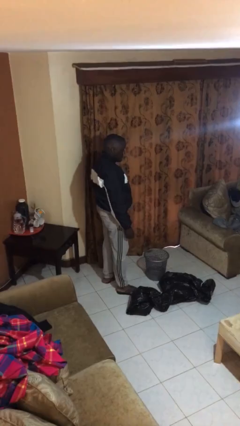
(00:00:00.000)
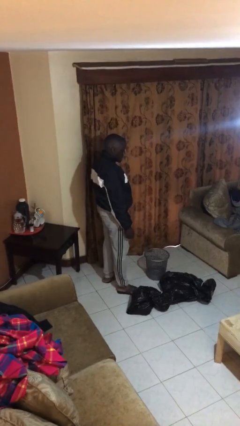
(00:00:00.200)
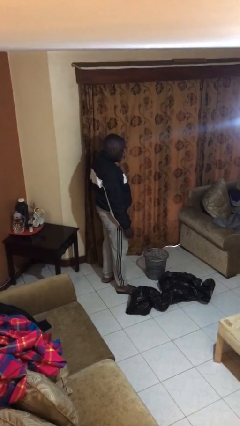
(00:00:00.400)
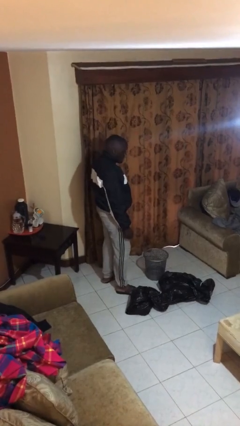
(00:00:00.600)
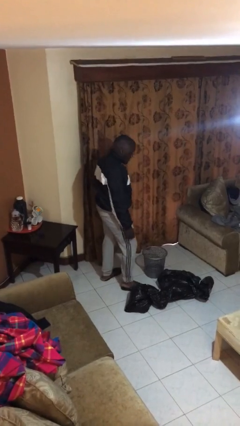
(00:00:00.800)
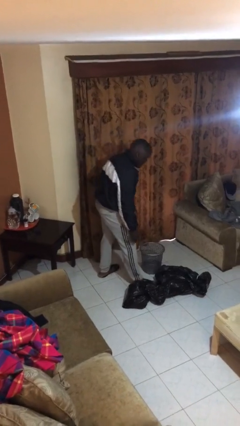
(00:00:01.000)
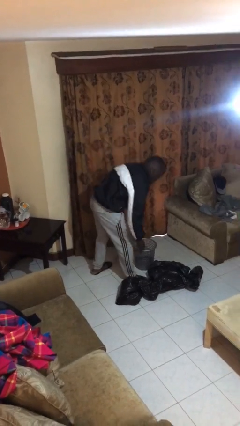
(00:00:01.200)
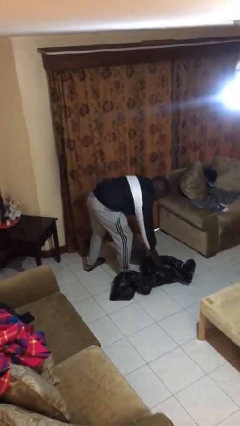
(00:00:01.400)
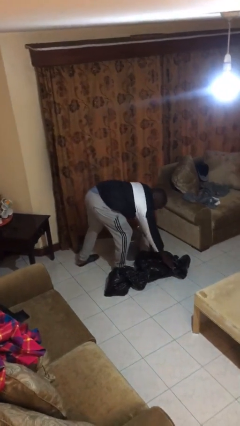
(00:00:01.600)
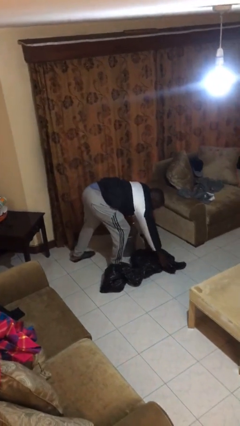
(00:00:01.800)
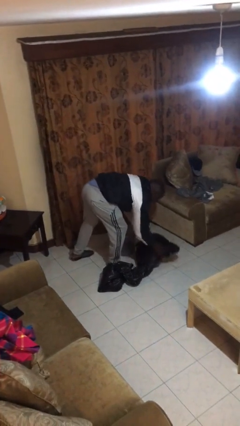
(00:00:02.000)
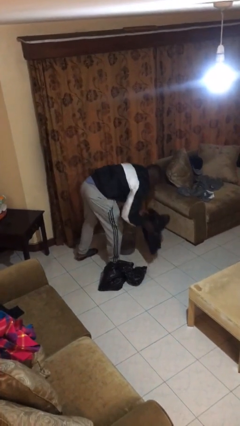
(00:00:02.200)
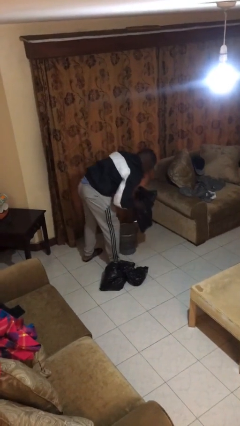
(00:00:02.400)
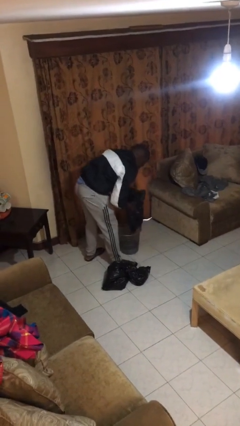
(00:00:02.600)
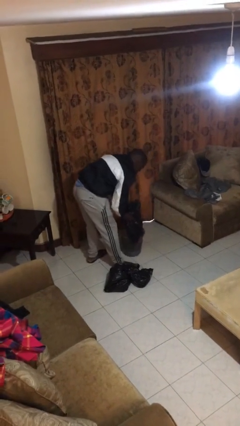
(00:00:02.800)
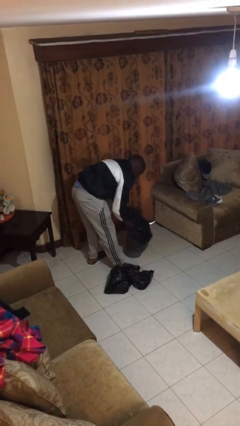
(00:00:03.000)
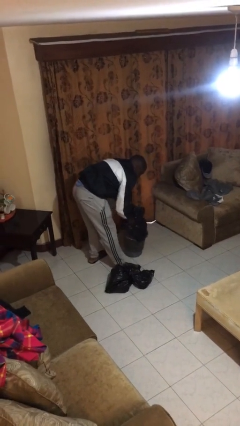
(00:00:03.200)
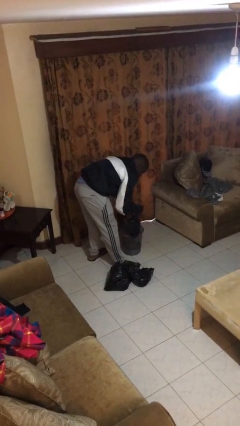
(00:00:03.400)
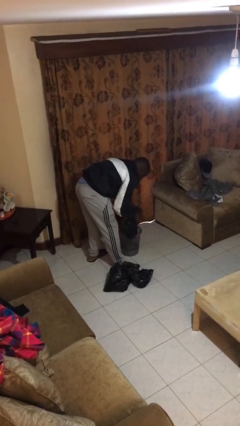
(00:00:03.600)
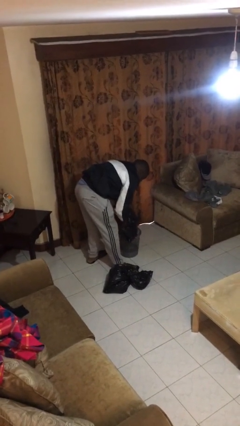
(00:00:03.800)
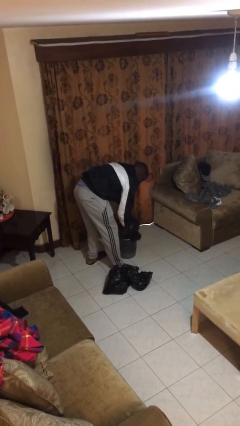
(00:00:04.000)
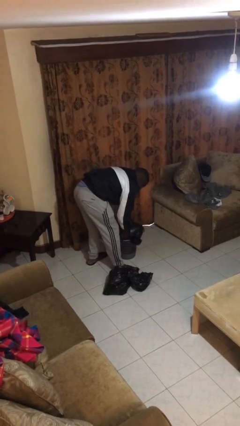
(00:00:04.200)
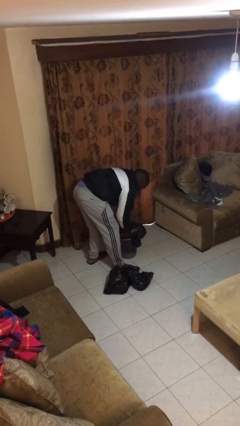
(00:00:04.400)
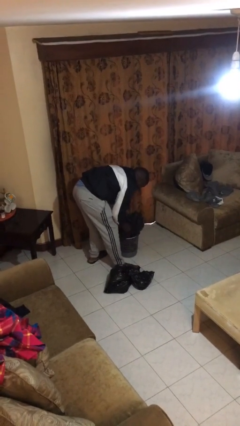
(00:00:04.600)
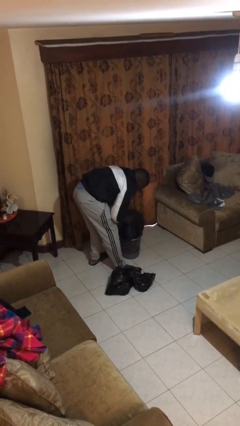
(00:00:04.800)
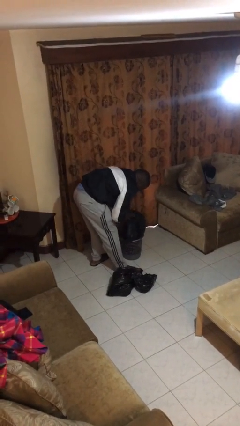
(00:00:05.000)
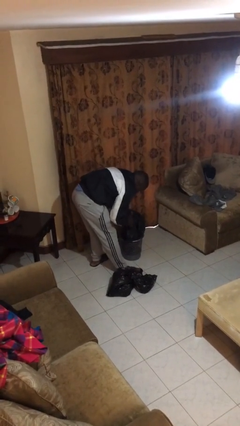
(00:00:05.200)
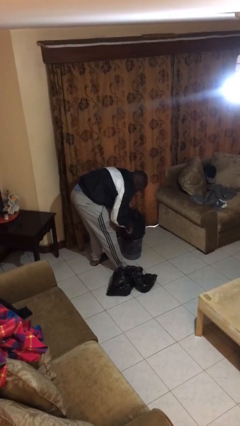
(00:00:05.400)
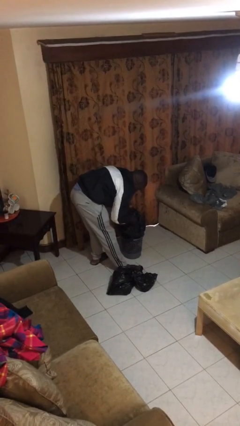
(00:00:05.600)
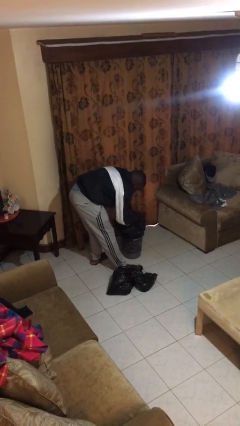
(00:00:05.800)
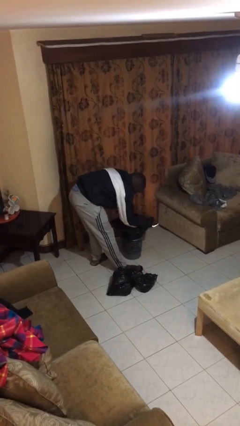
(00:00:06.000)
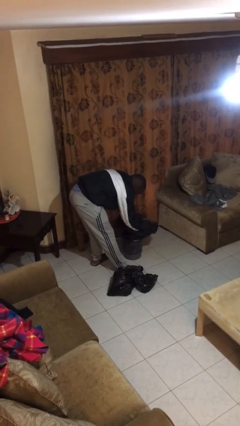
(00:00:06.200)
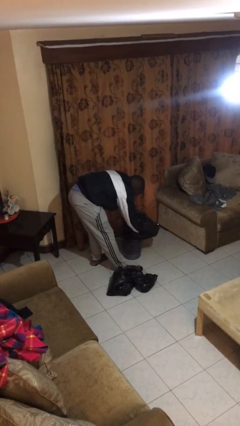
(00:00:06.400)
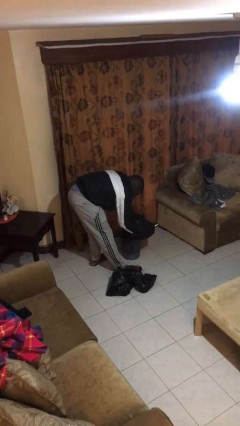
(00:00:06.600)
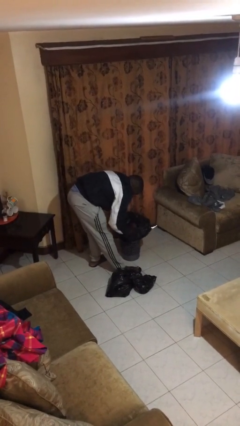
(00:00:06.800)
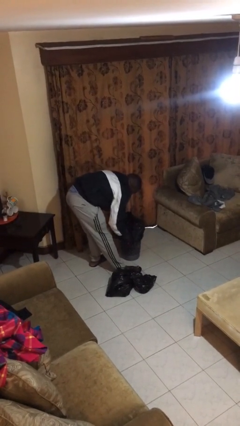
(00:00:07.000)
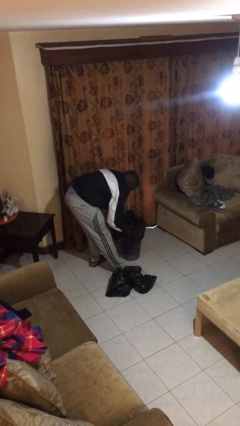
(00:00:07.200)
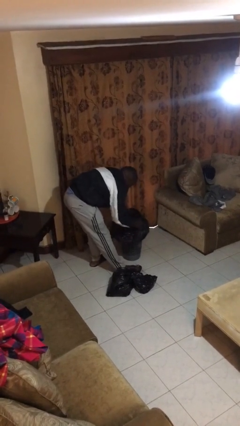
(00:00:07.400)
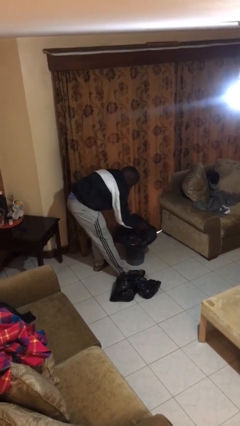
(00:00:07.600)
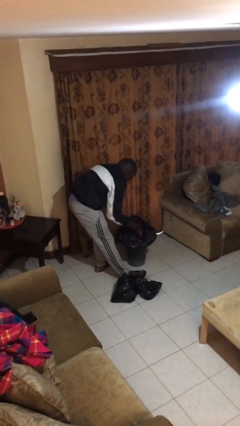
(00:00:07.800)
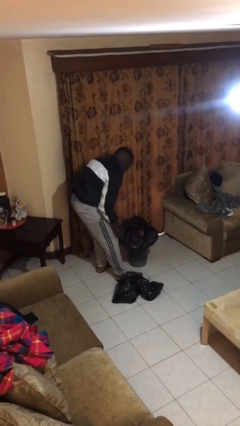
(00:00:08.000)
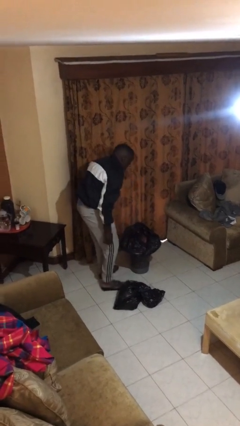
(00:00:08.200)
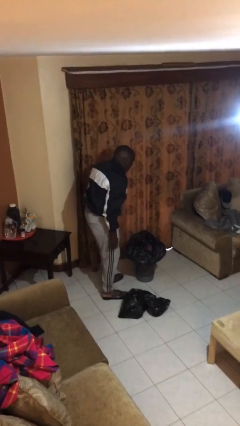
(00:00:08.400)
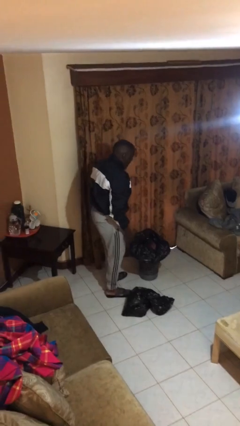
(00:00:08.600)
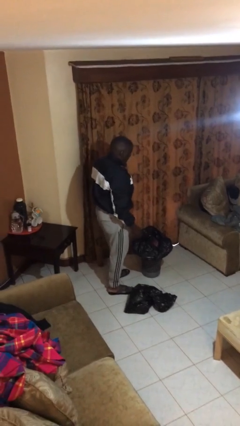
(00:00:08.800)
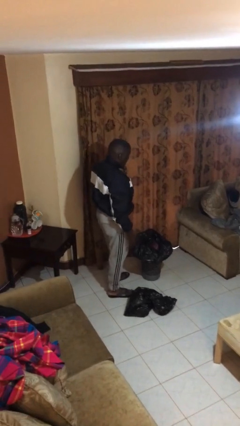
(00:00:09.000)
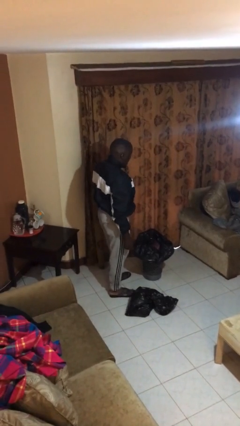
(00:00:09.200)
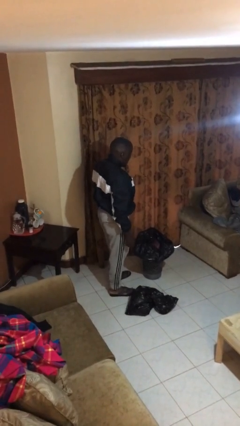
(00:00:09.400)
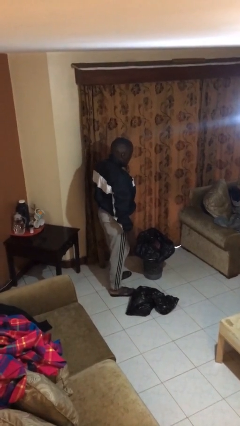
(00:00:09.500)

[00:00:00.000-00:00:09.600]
person inserts trashbag into trashcan

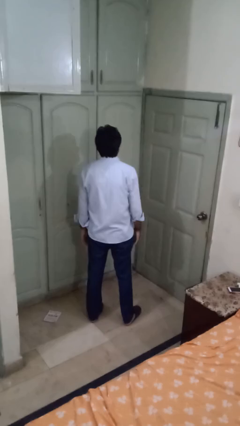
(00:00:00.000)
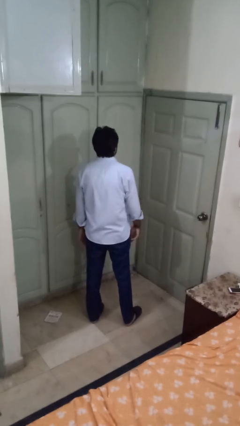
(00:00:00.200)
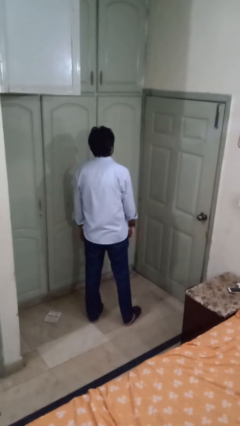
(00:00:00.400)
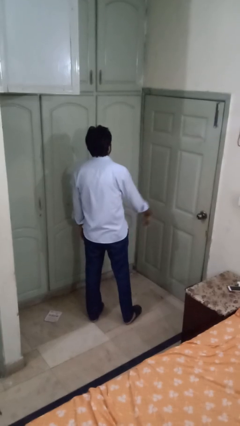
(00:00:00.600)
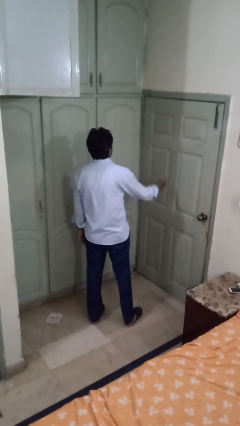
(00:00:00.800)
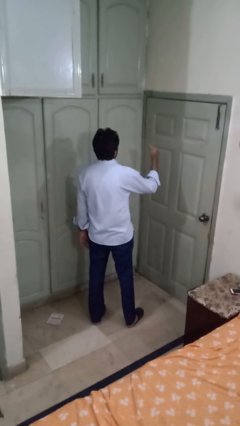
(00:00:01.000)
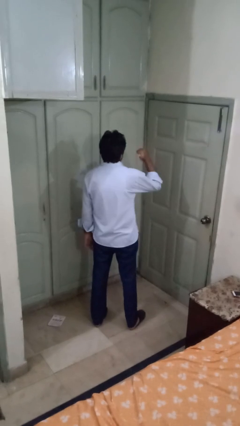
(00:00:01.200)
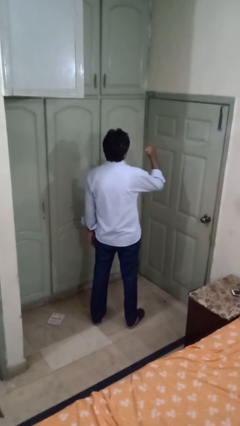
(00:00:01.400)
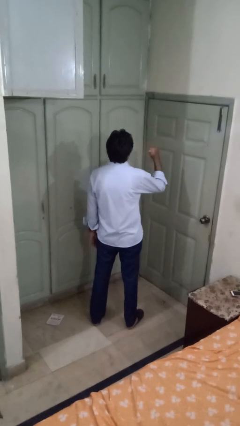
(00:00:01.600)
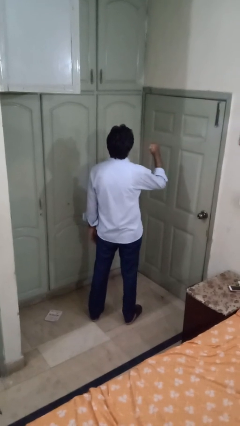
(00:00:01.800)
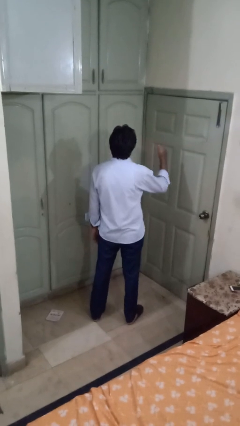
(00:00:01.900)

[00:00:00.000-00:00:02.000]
person gestures behind me

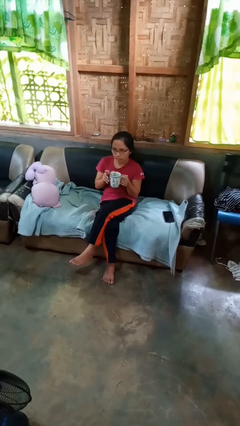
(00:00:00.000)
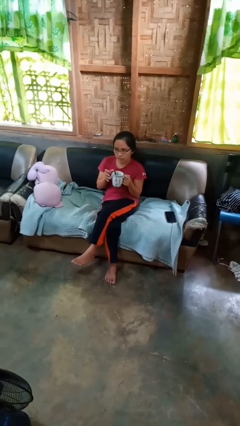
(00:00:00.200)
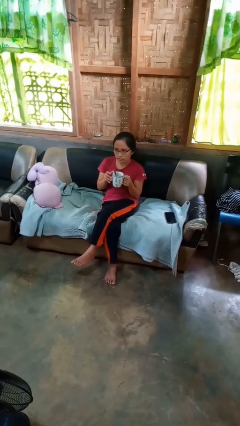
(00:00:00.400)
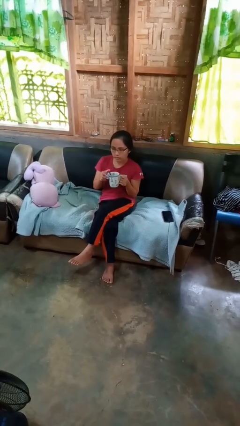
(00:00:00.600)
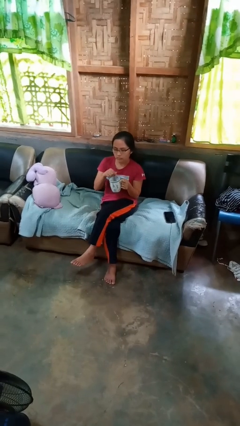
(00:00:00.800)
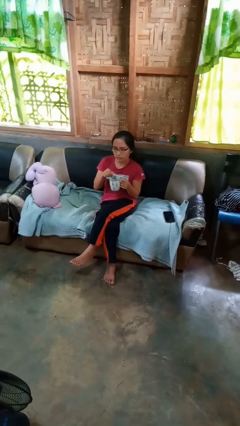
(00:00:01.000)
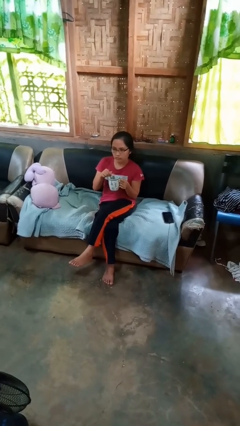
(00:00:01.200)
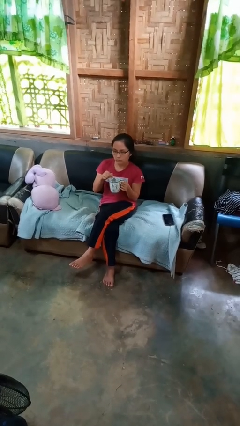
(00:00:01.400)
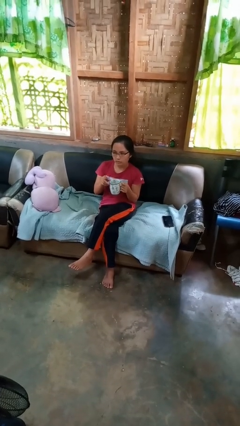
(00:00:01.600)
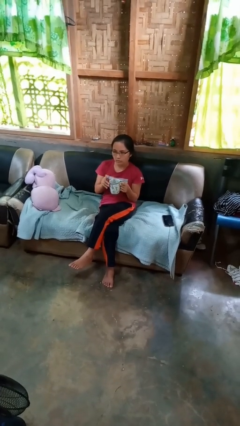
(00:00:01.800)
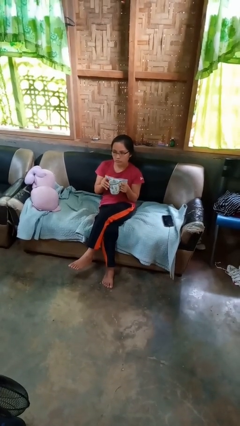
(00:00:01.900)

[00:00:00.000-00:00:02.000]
person stirs mug

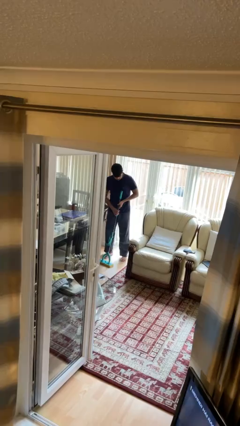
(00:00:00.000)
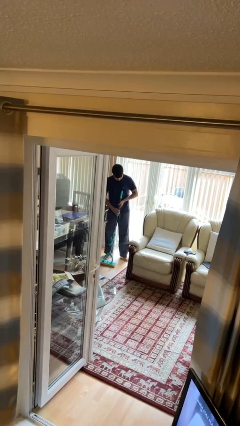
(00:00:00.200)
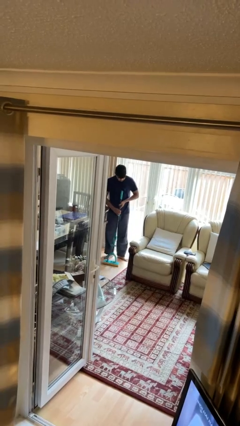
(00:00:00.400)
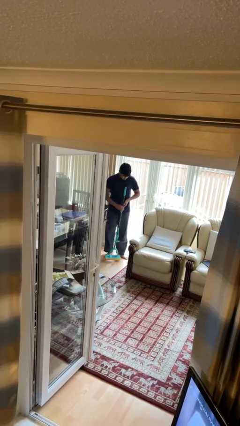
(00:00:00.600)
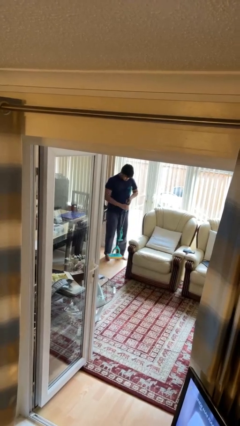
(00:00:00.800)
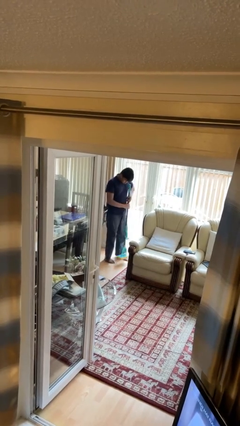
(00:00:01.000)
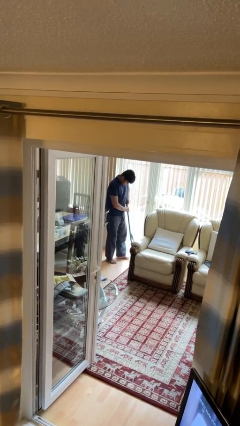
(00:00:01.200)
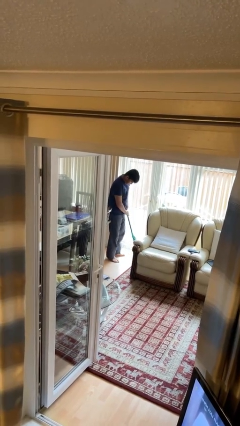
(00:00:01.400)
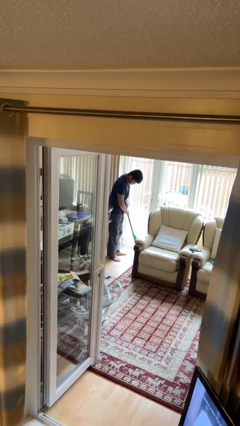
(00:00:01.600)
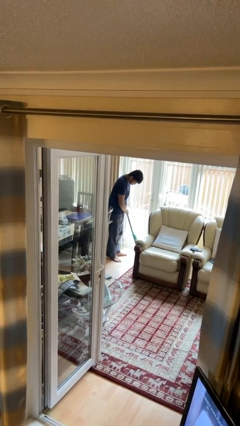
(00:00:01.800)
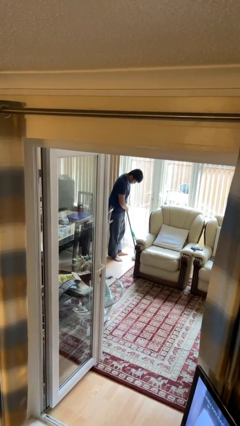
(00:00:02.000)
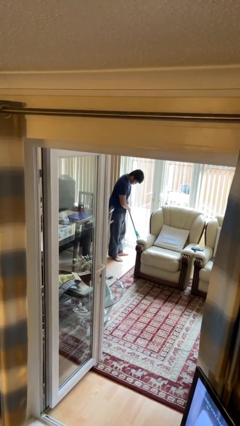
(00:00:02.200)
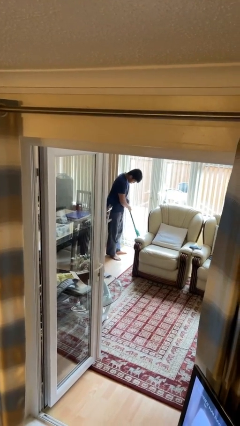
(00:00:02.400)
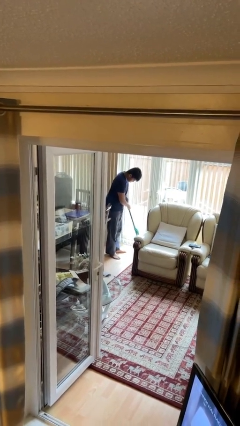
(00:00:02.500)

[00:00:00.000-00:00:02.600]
person mops

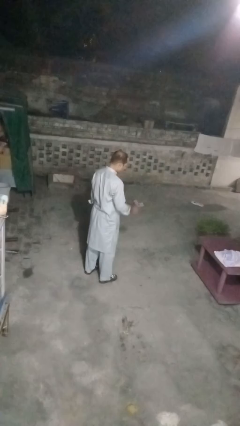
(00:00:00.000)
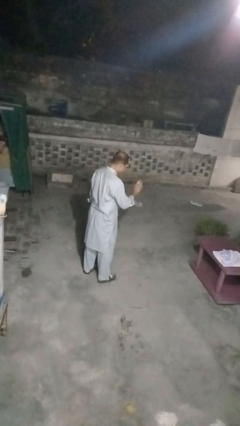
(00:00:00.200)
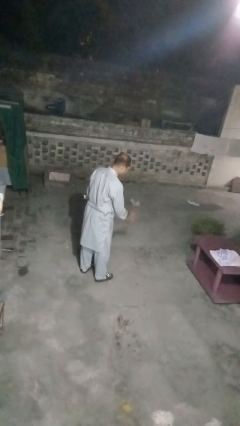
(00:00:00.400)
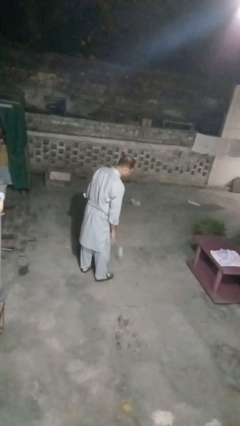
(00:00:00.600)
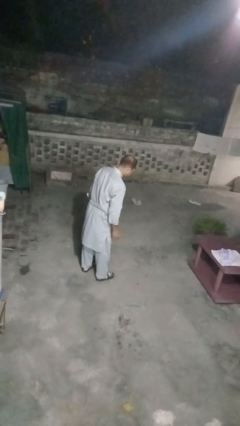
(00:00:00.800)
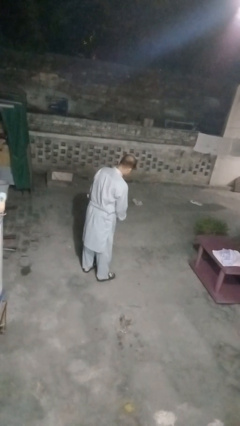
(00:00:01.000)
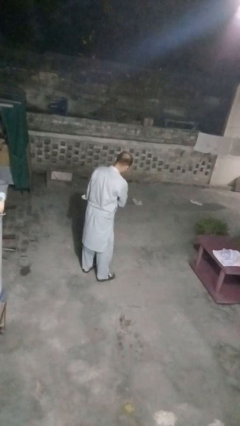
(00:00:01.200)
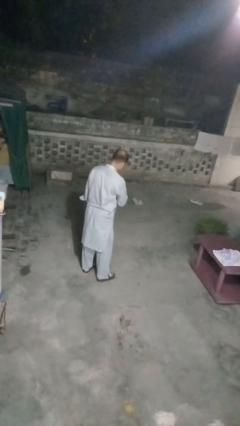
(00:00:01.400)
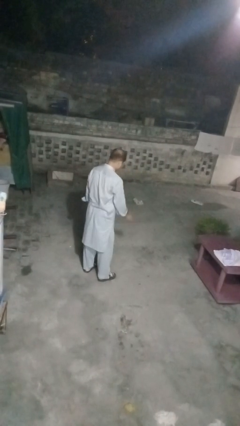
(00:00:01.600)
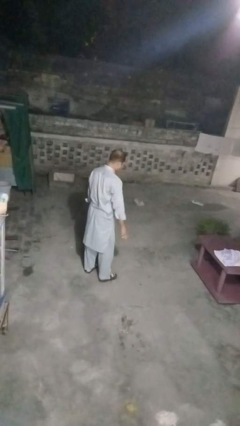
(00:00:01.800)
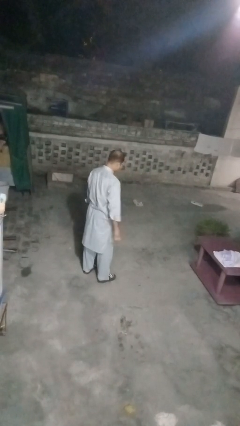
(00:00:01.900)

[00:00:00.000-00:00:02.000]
person bounces ball on floor
